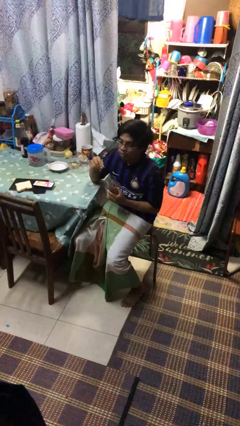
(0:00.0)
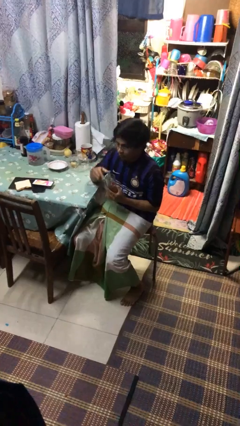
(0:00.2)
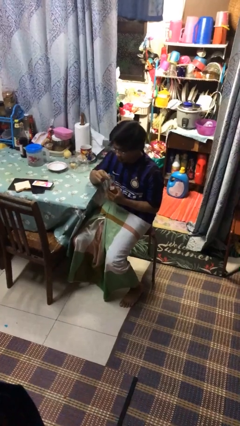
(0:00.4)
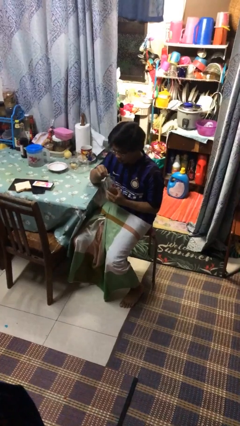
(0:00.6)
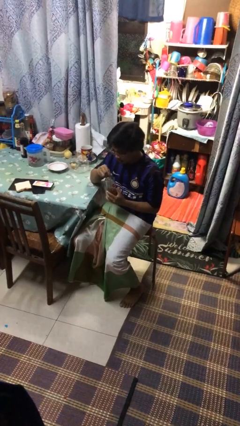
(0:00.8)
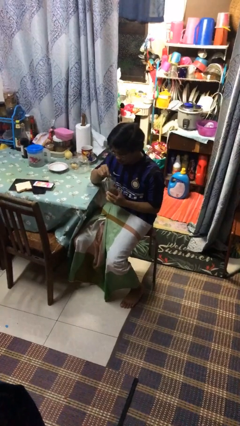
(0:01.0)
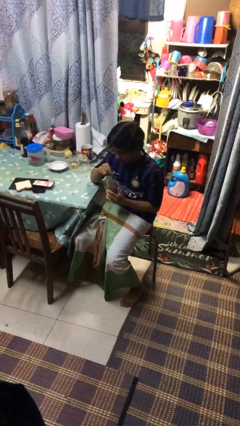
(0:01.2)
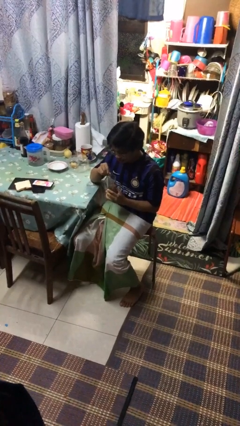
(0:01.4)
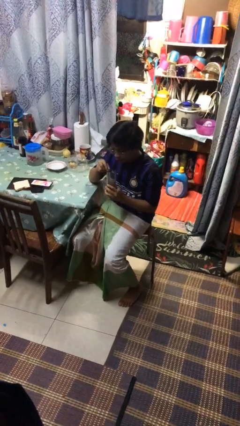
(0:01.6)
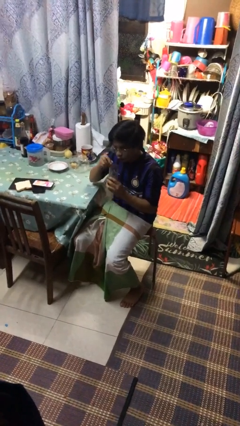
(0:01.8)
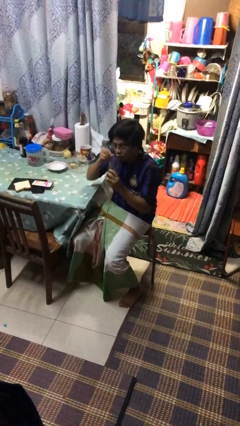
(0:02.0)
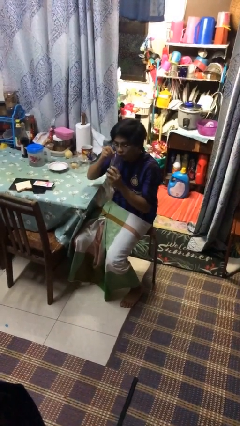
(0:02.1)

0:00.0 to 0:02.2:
person stirs mug

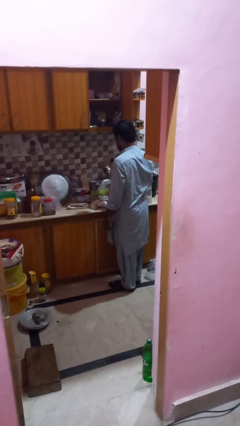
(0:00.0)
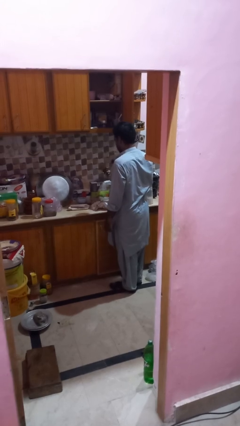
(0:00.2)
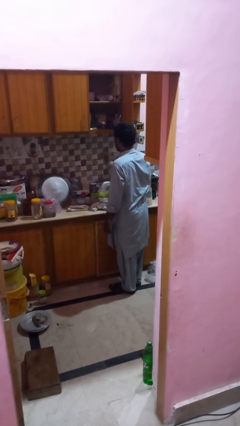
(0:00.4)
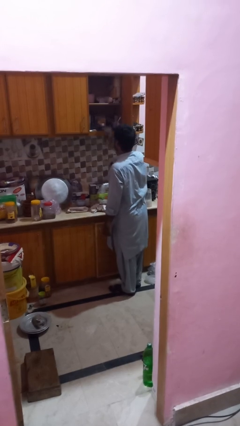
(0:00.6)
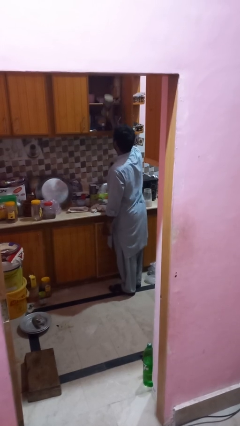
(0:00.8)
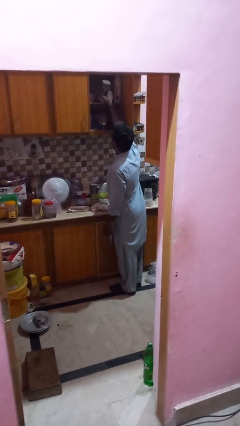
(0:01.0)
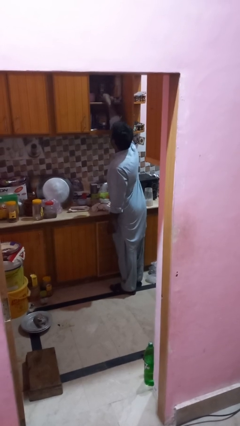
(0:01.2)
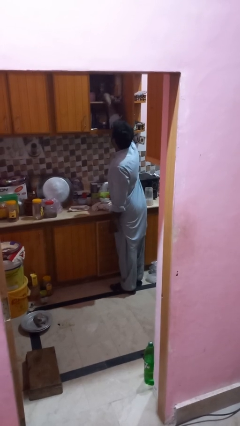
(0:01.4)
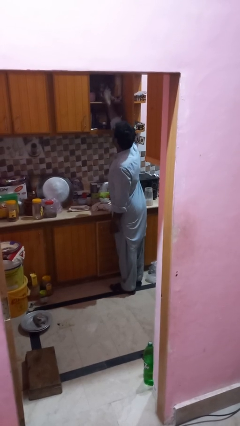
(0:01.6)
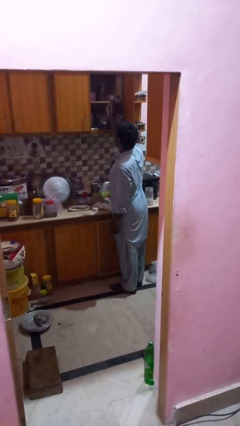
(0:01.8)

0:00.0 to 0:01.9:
person puts object in cabinet

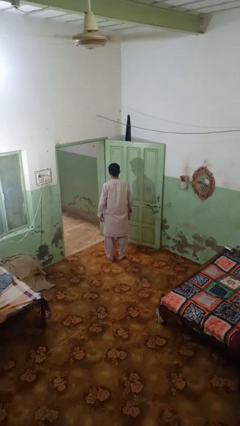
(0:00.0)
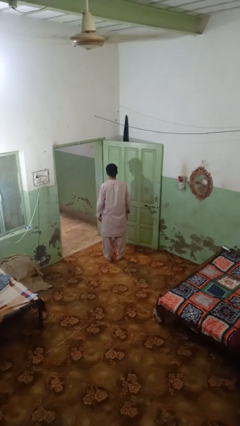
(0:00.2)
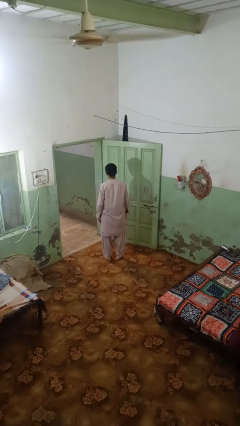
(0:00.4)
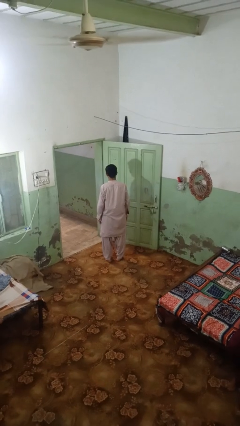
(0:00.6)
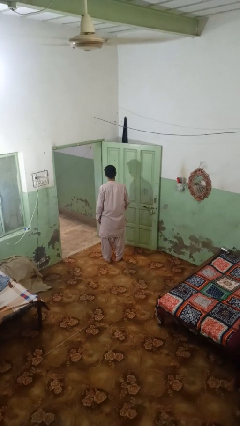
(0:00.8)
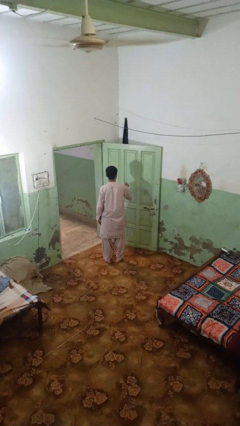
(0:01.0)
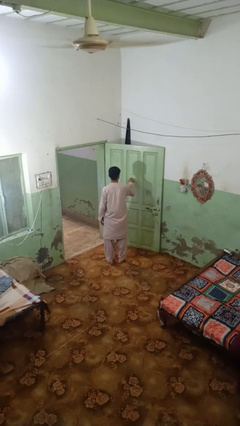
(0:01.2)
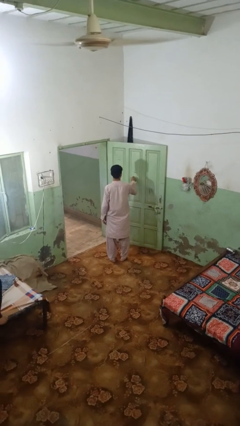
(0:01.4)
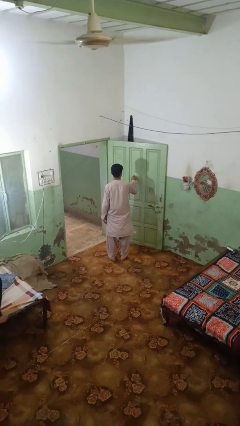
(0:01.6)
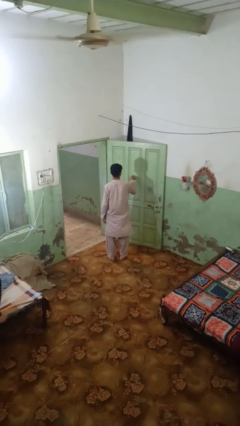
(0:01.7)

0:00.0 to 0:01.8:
person taps object with finger

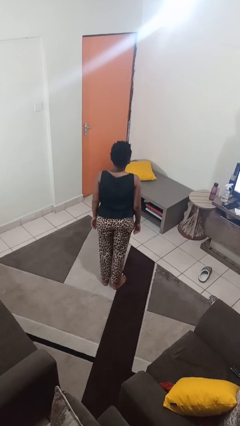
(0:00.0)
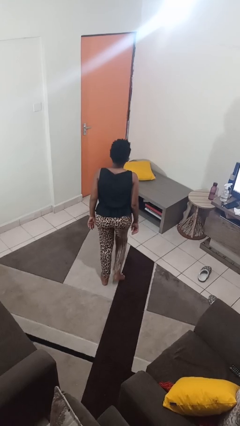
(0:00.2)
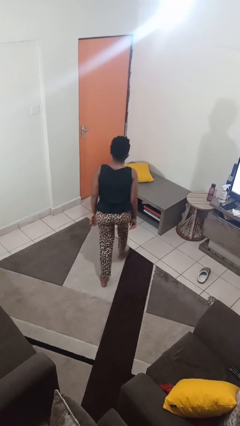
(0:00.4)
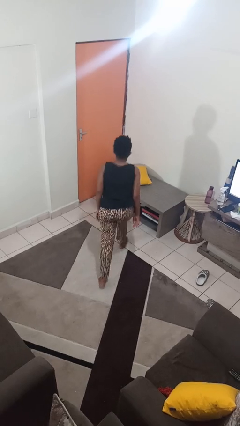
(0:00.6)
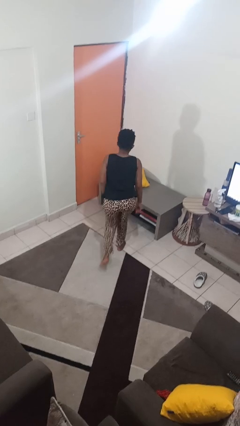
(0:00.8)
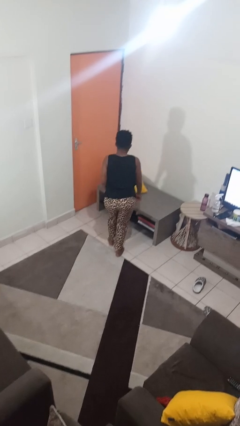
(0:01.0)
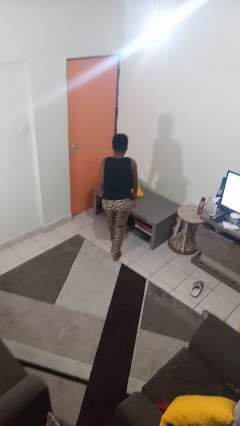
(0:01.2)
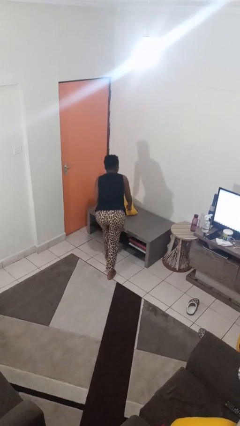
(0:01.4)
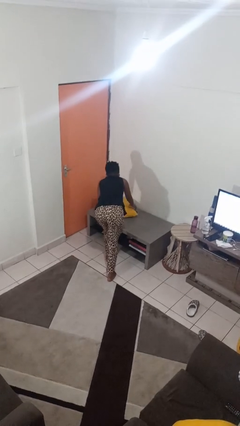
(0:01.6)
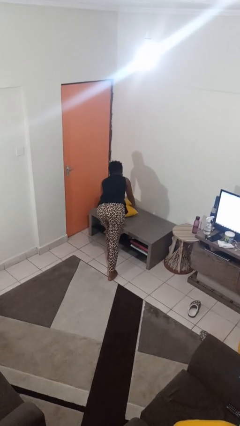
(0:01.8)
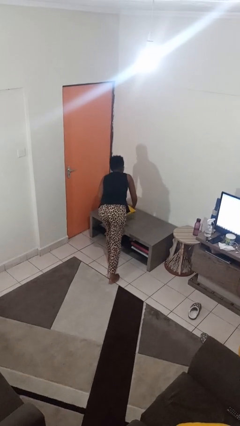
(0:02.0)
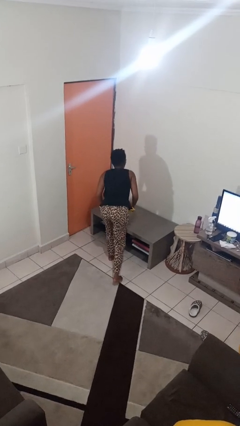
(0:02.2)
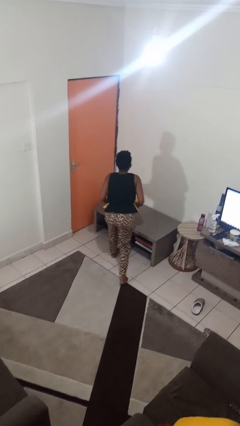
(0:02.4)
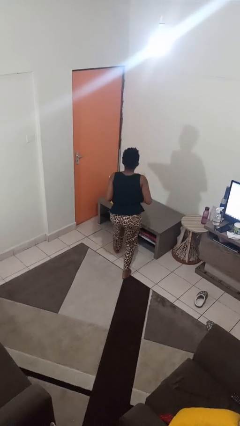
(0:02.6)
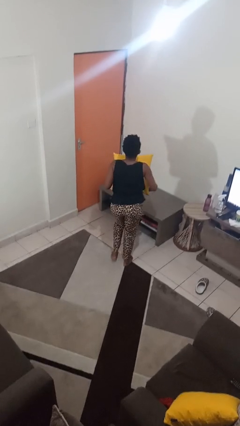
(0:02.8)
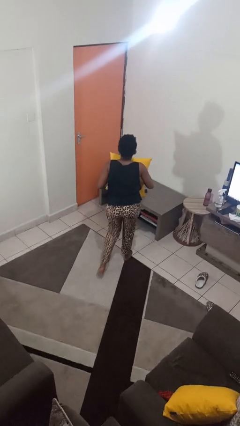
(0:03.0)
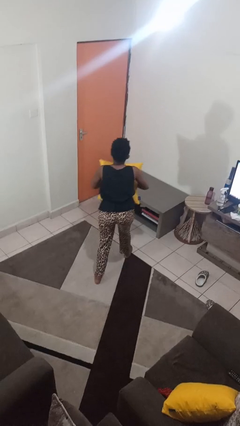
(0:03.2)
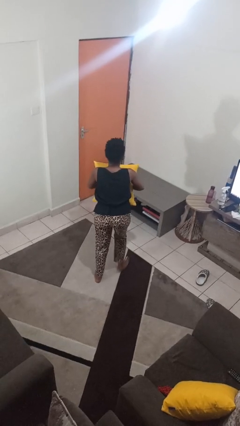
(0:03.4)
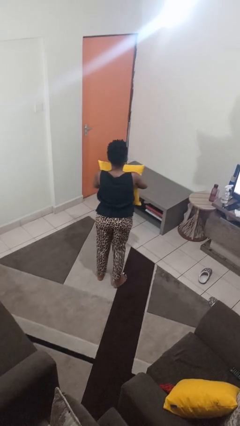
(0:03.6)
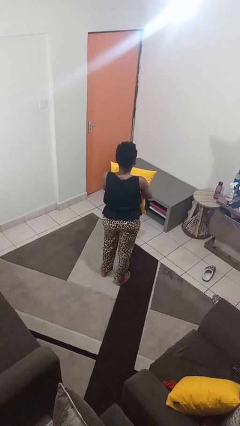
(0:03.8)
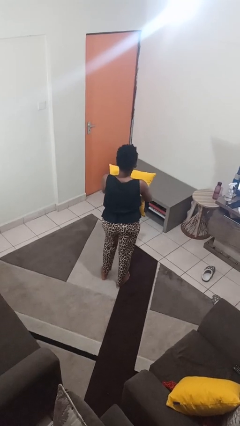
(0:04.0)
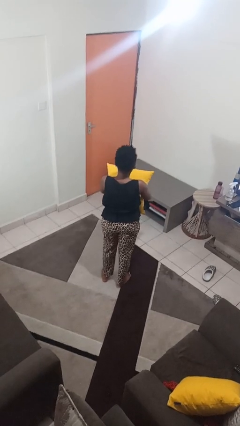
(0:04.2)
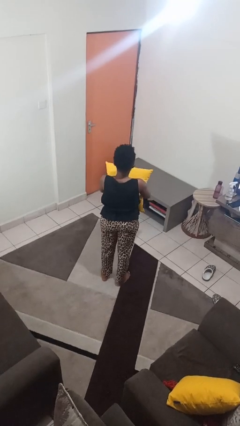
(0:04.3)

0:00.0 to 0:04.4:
person picks up object from table

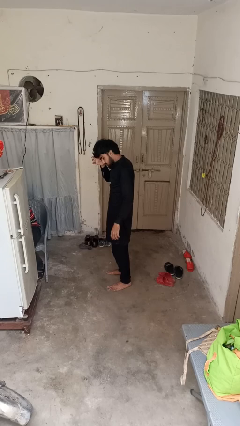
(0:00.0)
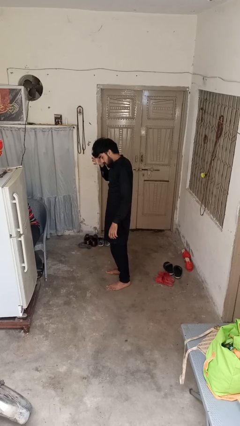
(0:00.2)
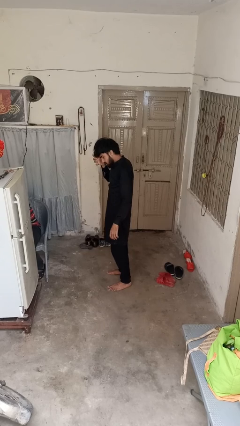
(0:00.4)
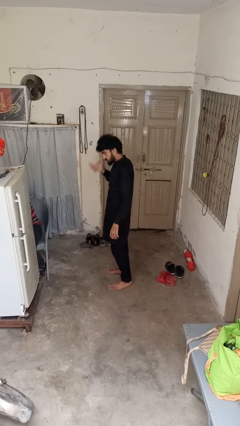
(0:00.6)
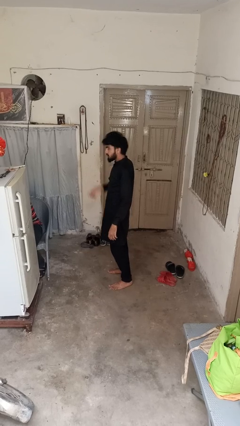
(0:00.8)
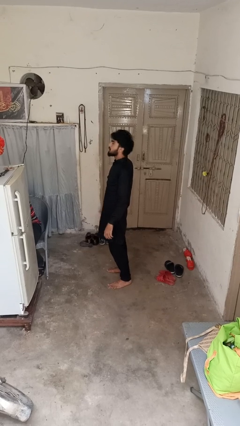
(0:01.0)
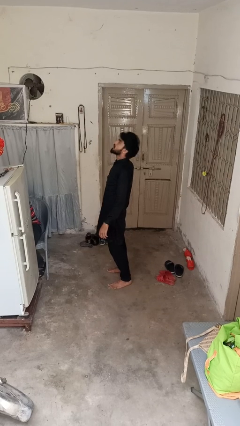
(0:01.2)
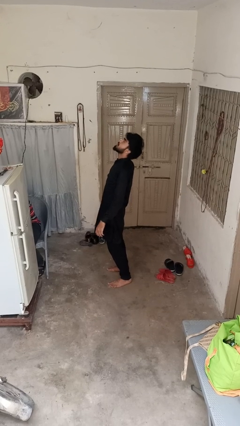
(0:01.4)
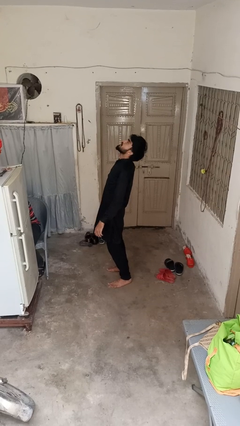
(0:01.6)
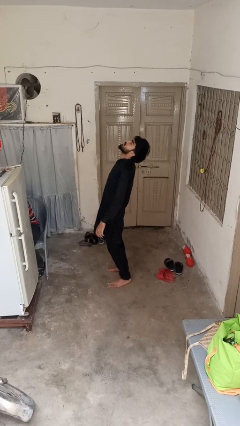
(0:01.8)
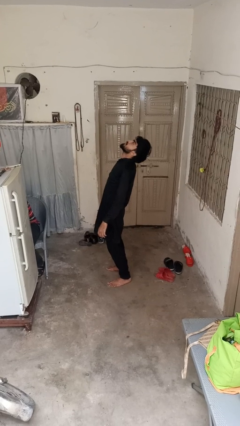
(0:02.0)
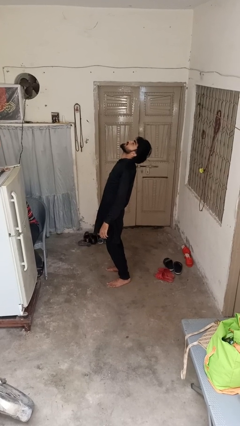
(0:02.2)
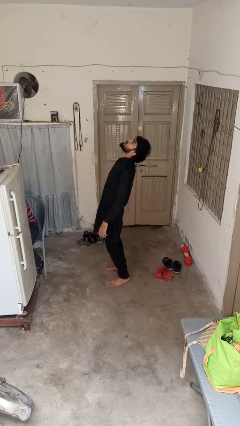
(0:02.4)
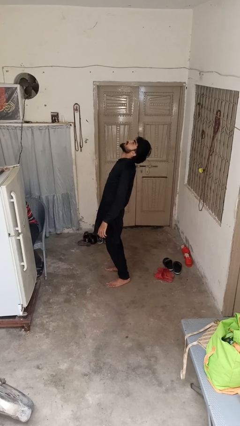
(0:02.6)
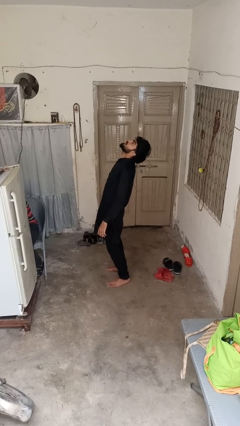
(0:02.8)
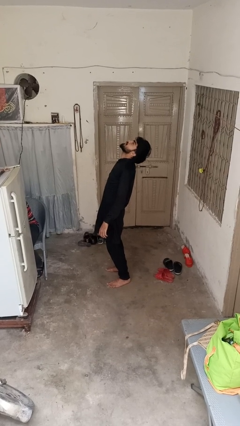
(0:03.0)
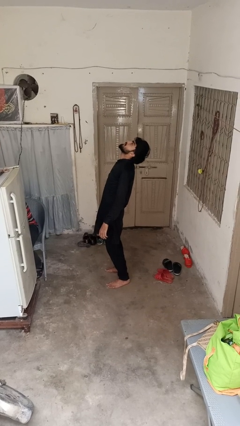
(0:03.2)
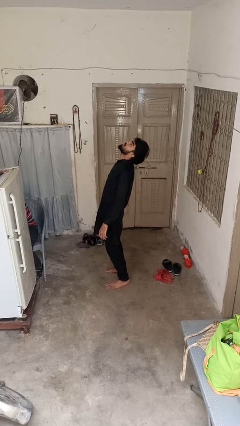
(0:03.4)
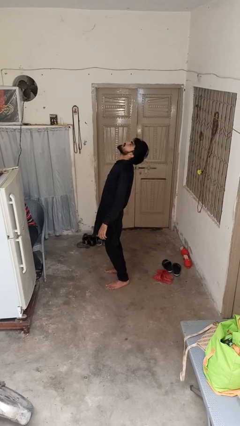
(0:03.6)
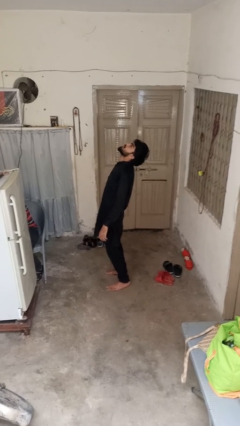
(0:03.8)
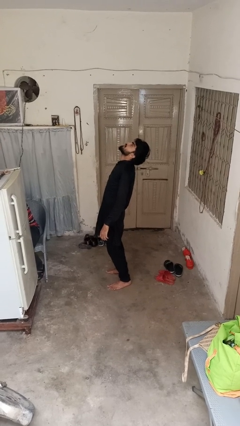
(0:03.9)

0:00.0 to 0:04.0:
person stretches back

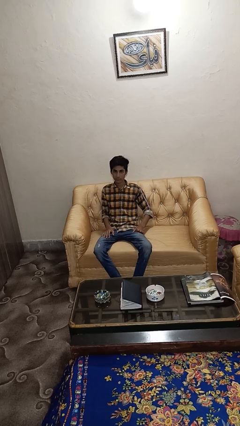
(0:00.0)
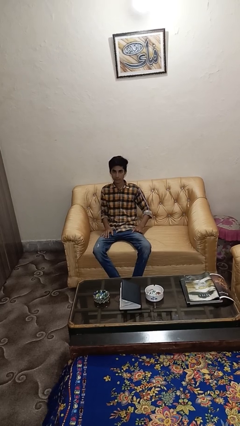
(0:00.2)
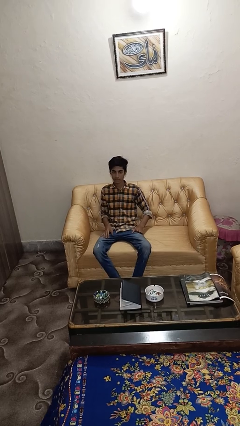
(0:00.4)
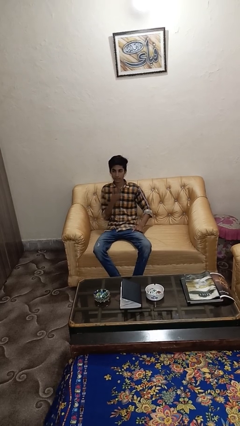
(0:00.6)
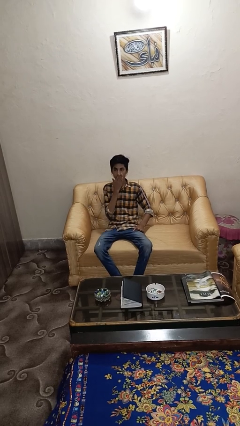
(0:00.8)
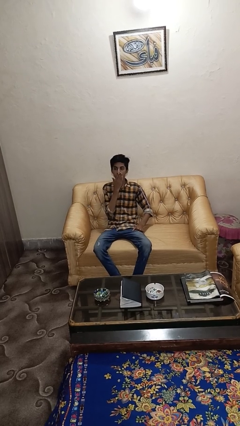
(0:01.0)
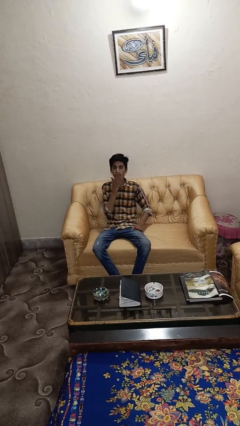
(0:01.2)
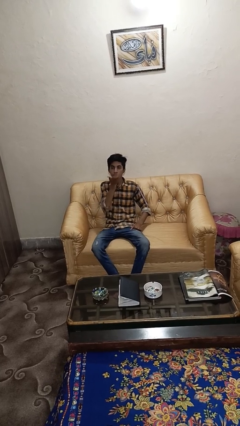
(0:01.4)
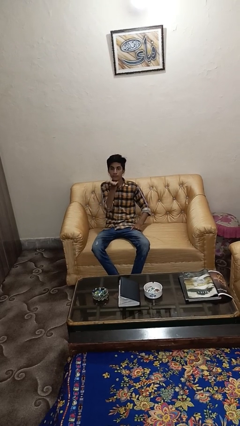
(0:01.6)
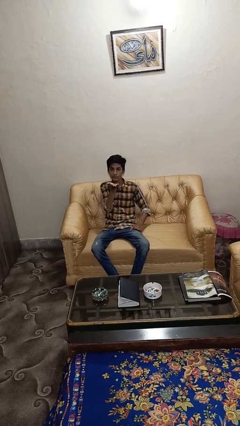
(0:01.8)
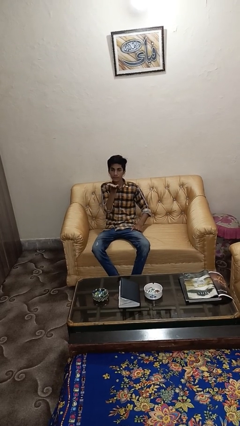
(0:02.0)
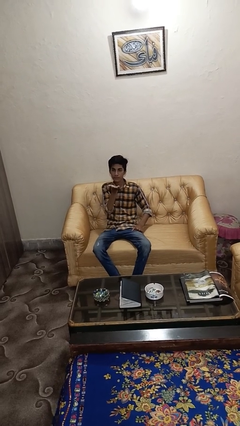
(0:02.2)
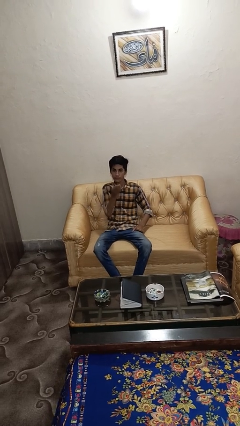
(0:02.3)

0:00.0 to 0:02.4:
person gestures blow kiss

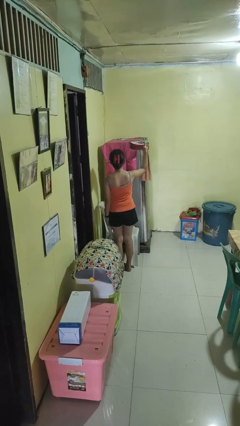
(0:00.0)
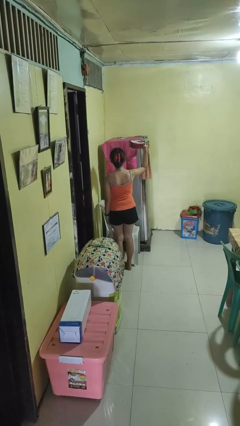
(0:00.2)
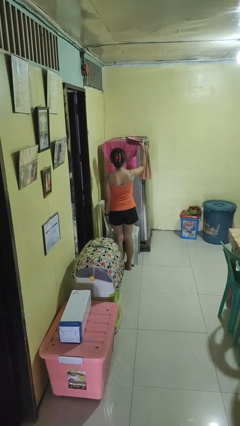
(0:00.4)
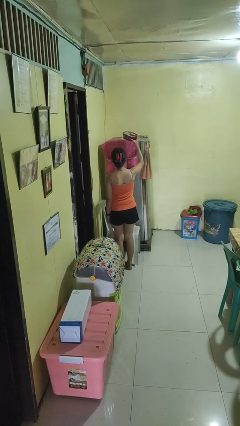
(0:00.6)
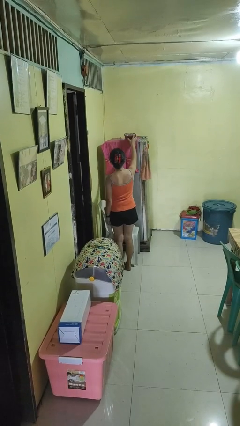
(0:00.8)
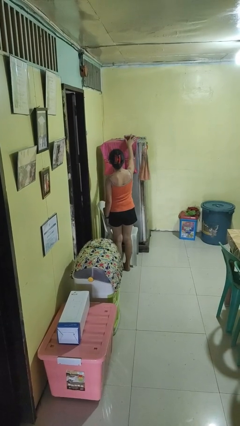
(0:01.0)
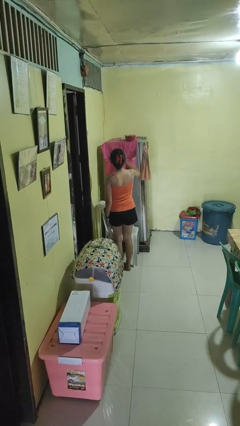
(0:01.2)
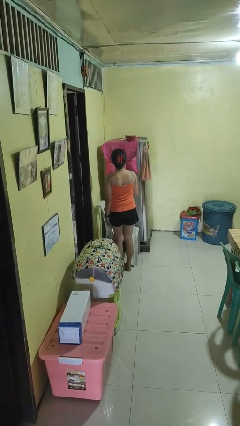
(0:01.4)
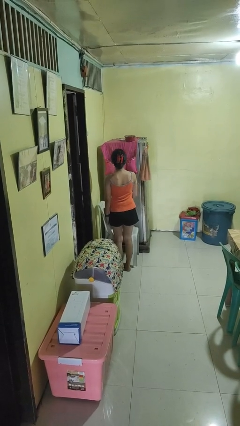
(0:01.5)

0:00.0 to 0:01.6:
person puts down object on shelf
